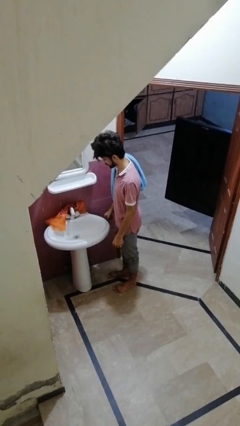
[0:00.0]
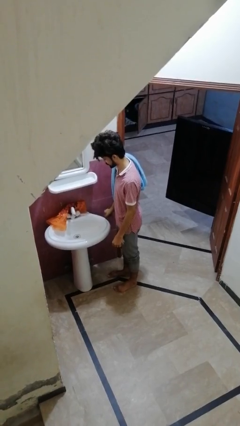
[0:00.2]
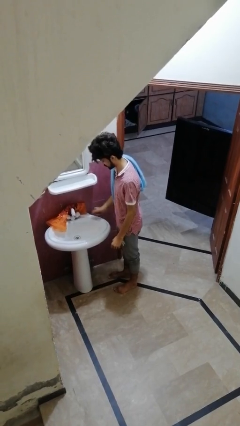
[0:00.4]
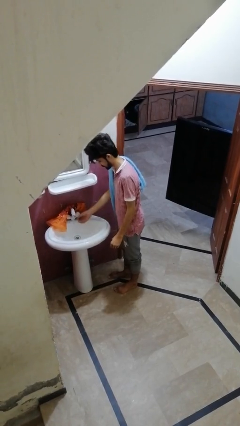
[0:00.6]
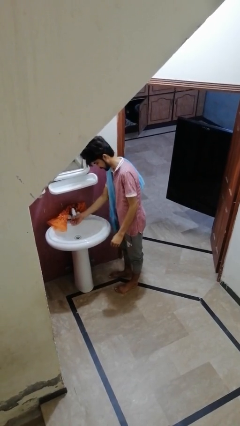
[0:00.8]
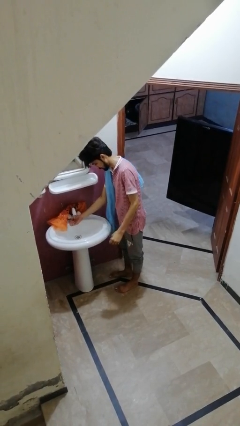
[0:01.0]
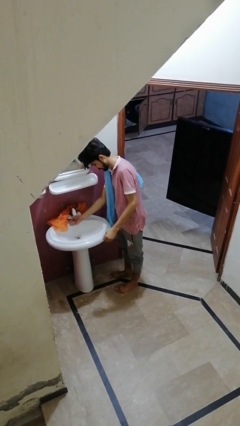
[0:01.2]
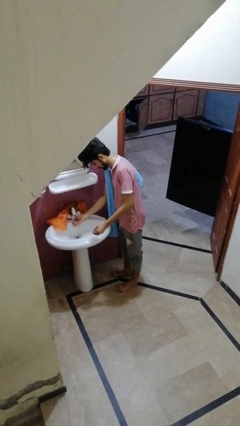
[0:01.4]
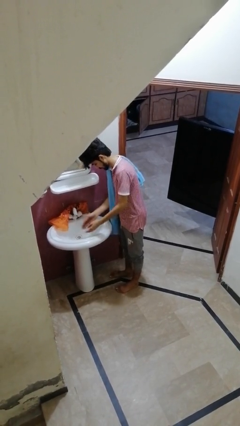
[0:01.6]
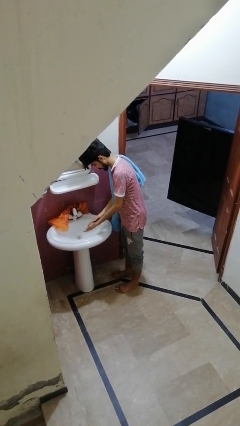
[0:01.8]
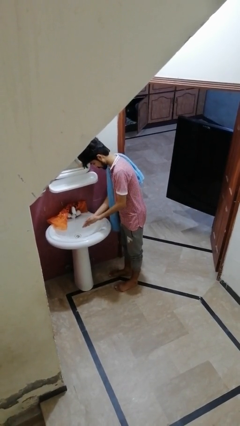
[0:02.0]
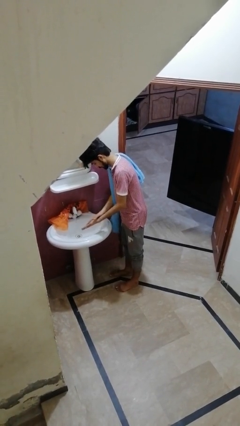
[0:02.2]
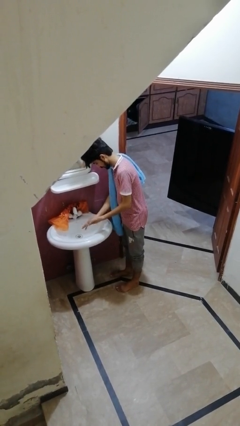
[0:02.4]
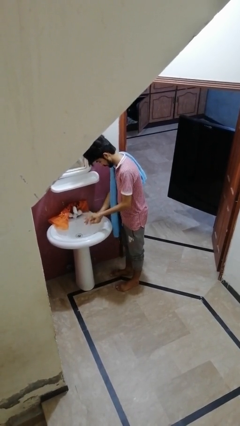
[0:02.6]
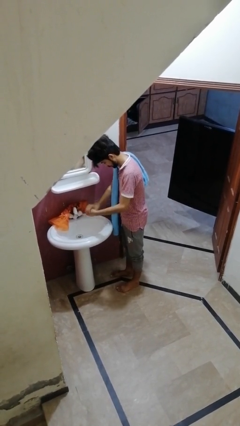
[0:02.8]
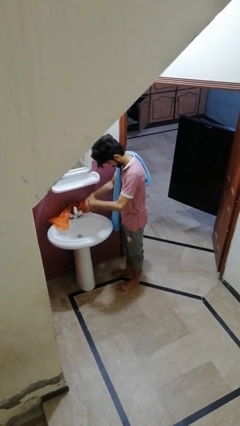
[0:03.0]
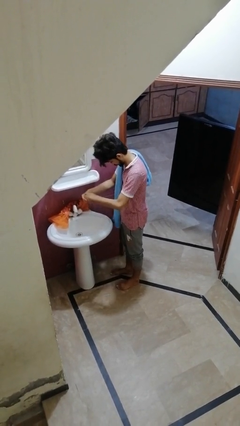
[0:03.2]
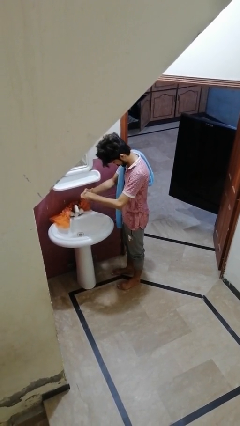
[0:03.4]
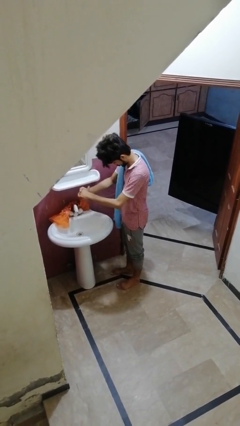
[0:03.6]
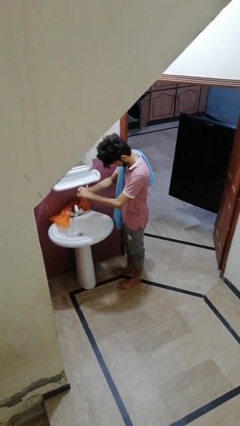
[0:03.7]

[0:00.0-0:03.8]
person washes hands

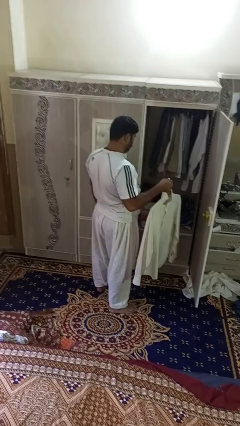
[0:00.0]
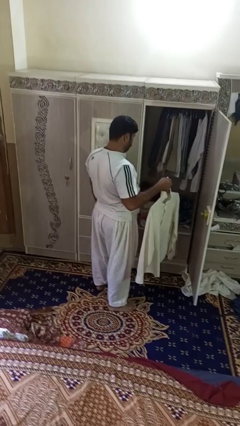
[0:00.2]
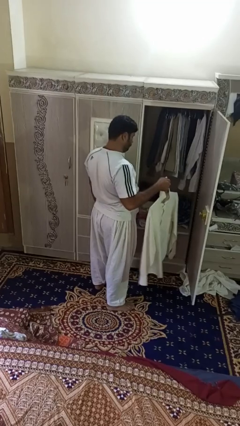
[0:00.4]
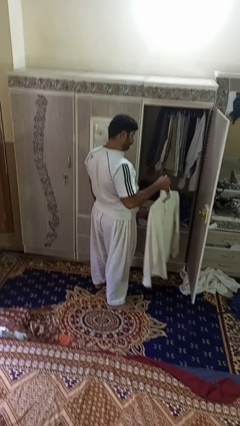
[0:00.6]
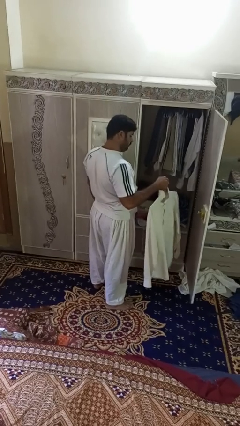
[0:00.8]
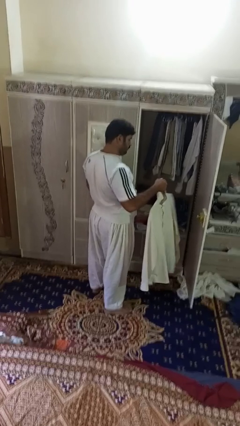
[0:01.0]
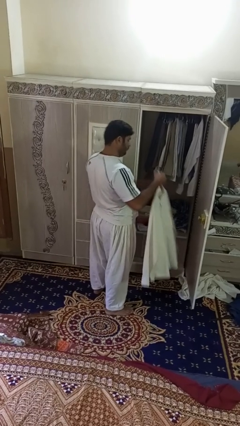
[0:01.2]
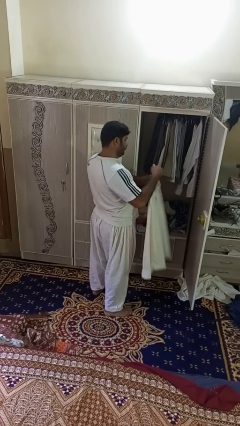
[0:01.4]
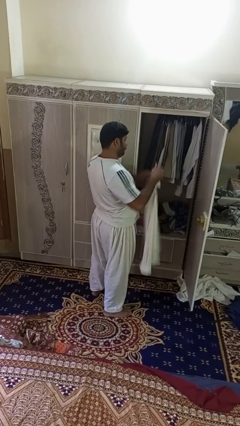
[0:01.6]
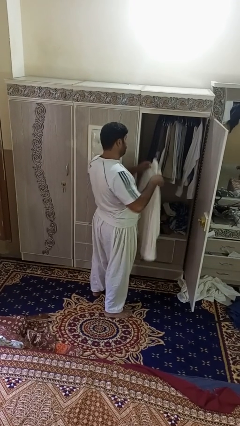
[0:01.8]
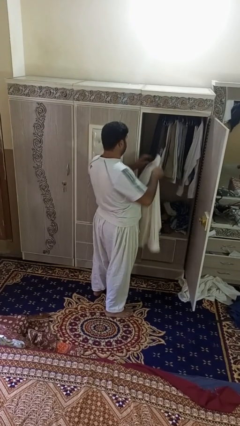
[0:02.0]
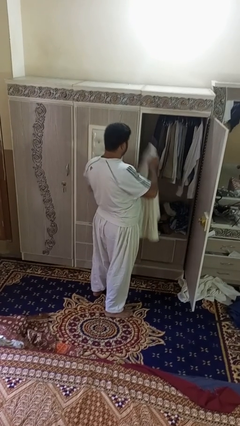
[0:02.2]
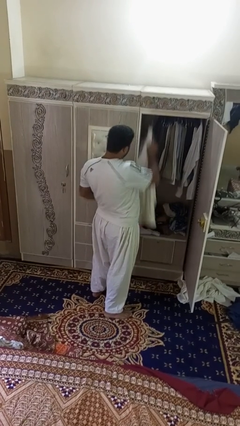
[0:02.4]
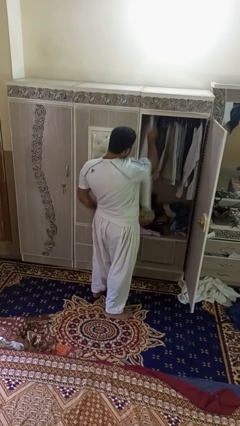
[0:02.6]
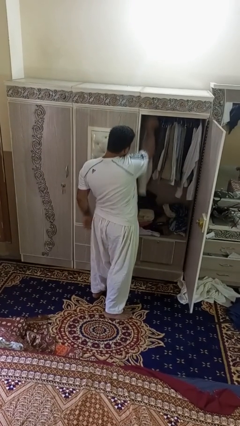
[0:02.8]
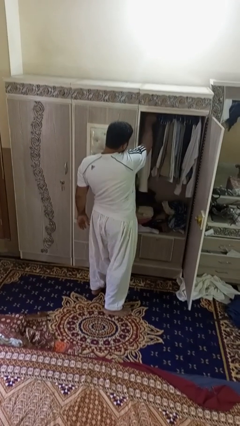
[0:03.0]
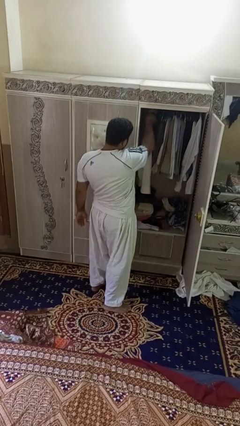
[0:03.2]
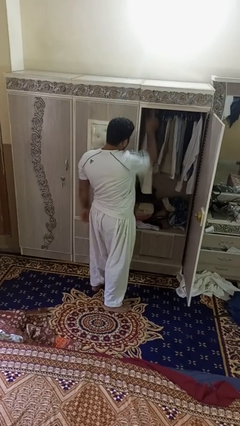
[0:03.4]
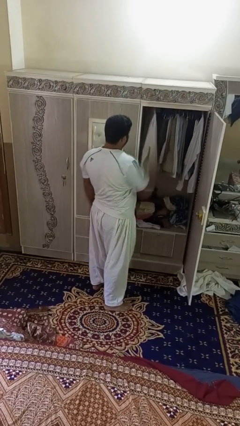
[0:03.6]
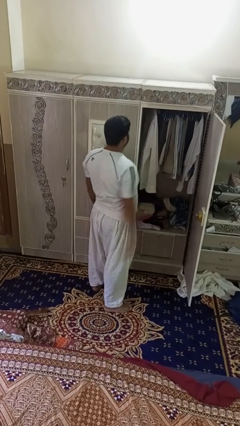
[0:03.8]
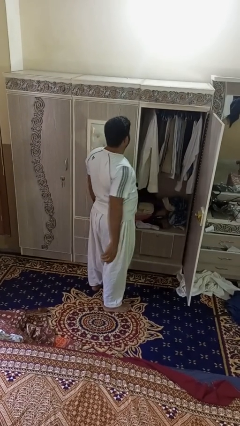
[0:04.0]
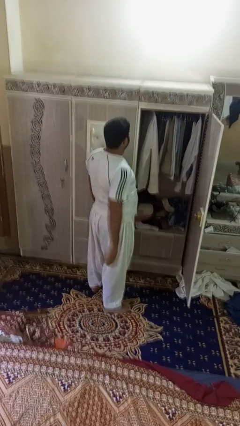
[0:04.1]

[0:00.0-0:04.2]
person puts clothes into closet

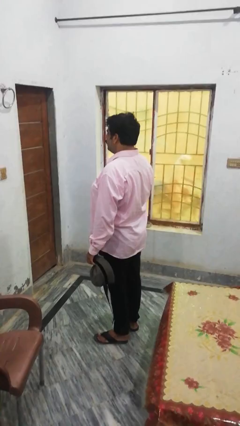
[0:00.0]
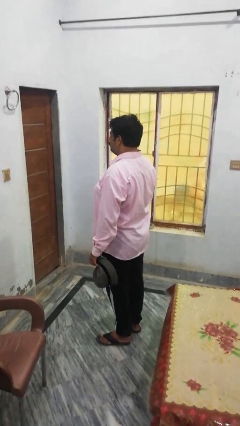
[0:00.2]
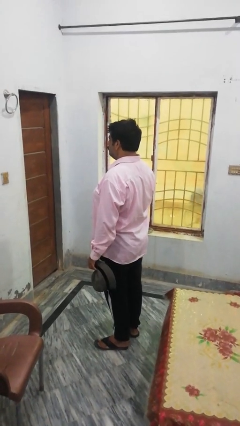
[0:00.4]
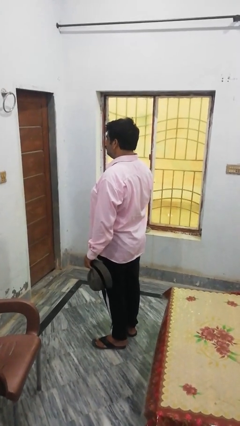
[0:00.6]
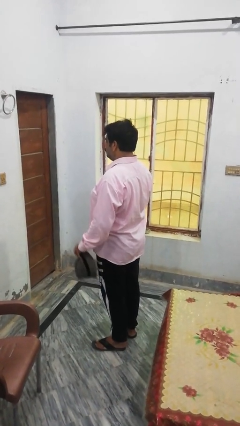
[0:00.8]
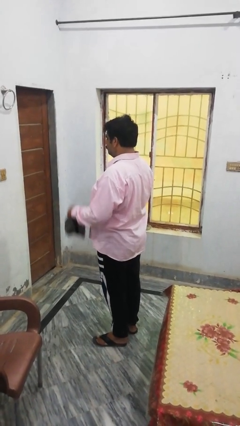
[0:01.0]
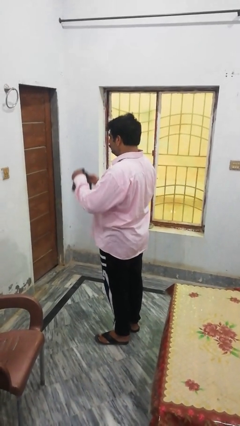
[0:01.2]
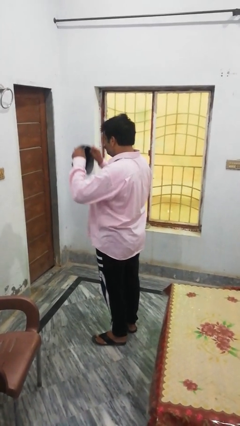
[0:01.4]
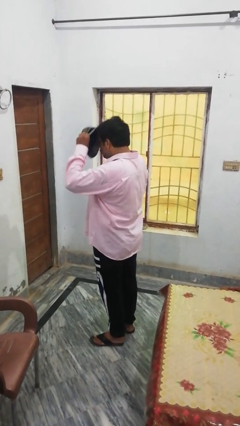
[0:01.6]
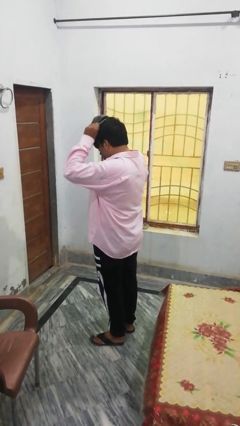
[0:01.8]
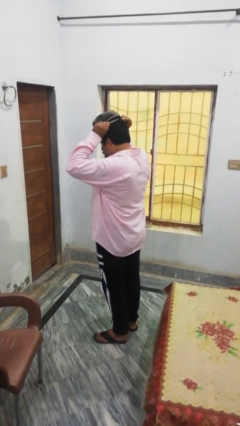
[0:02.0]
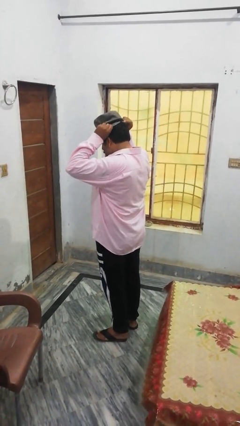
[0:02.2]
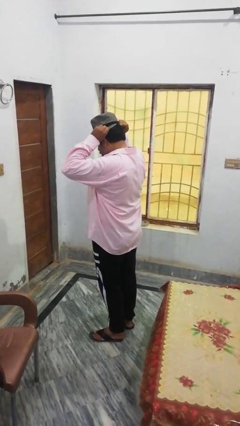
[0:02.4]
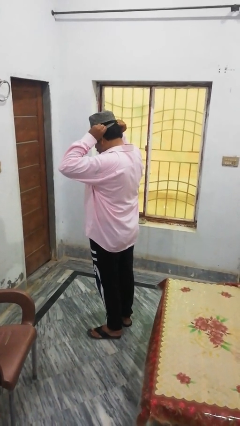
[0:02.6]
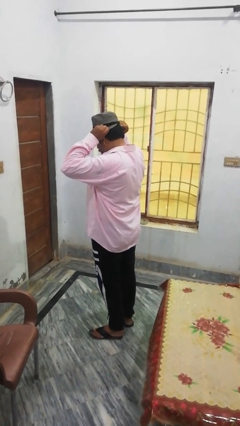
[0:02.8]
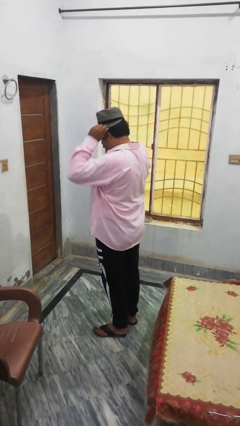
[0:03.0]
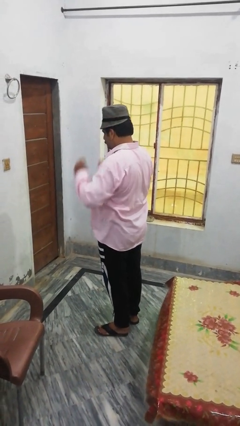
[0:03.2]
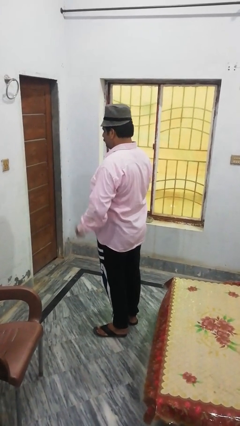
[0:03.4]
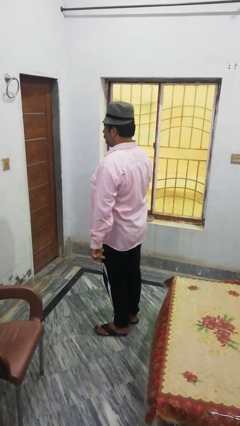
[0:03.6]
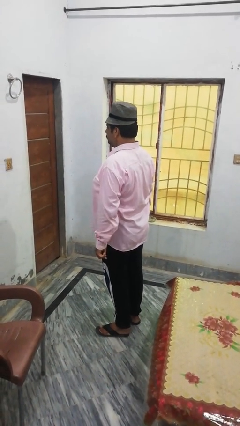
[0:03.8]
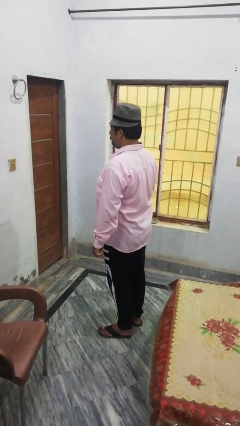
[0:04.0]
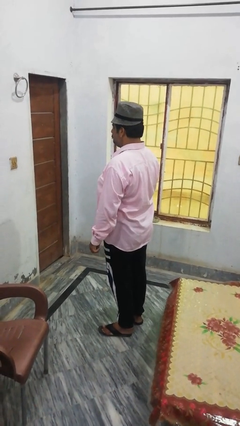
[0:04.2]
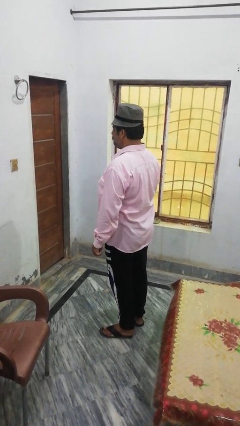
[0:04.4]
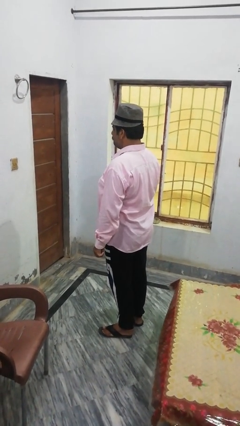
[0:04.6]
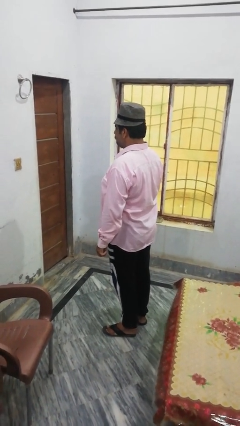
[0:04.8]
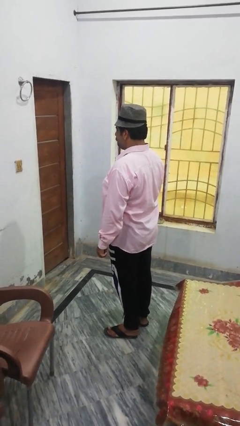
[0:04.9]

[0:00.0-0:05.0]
person puts on hat

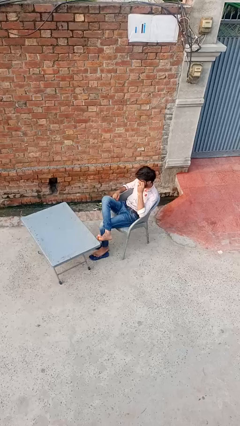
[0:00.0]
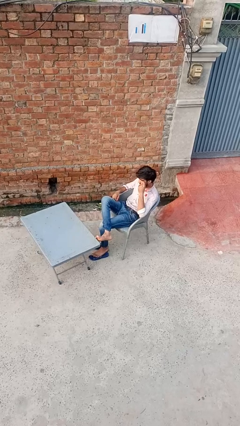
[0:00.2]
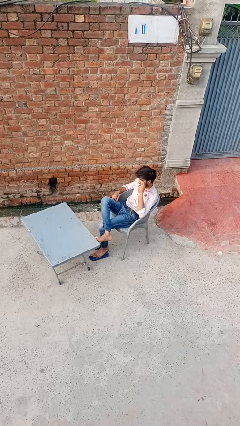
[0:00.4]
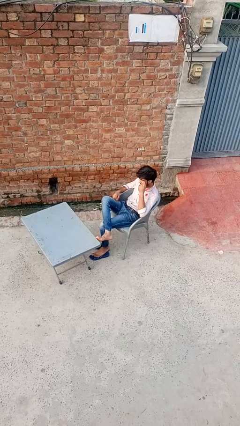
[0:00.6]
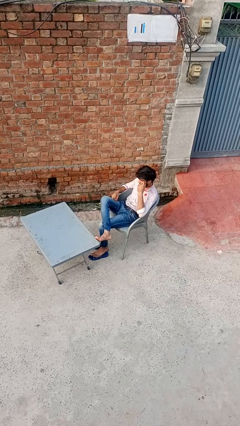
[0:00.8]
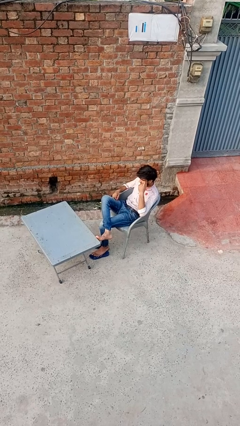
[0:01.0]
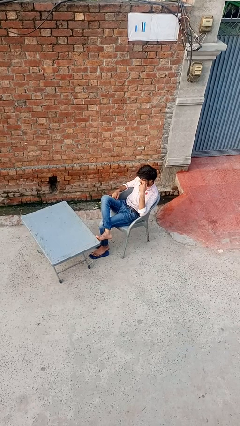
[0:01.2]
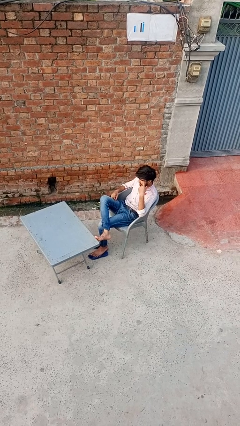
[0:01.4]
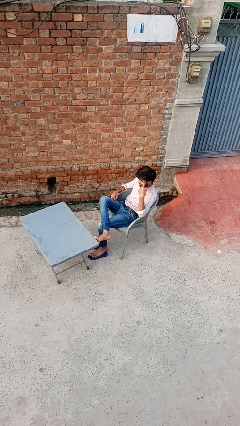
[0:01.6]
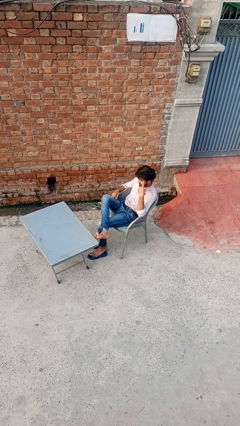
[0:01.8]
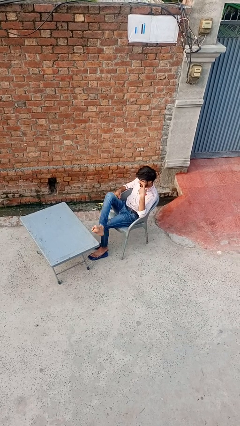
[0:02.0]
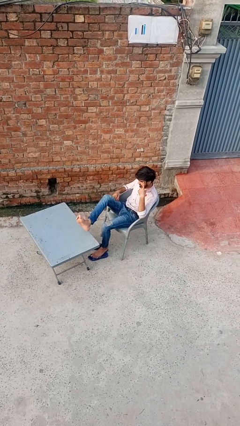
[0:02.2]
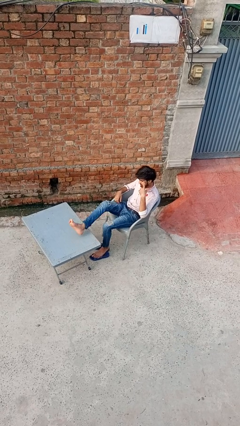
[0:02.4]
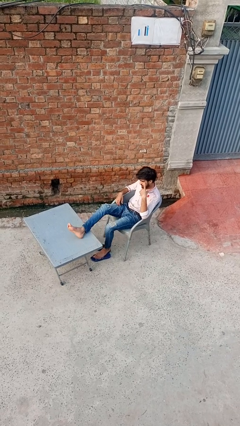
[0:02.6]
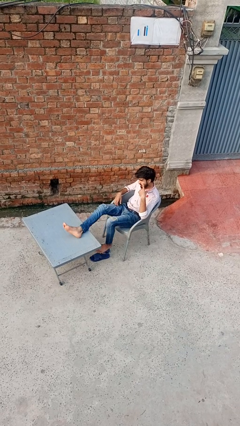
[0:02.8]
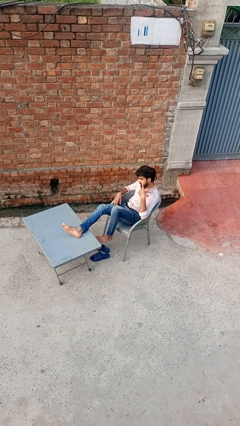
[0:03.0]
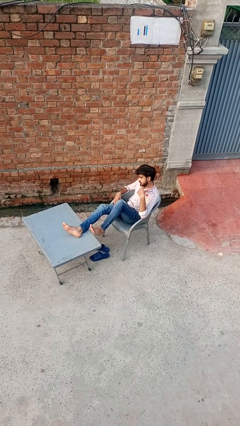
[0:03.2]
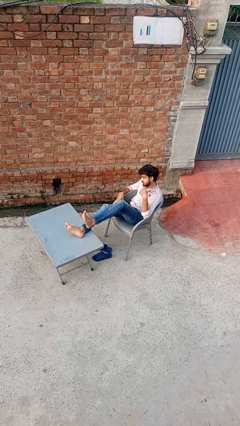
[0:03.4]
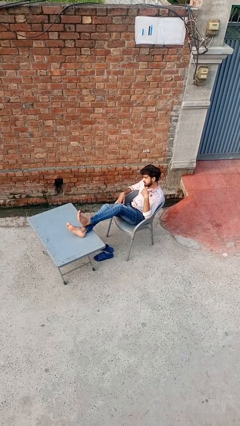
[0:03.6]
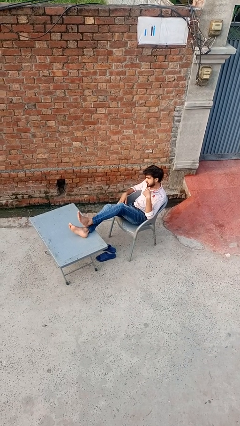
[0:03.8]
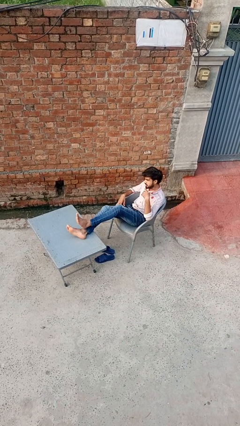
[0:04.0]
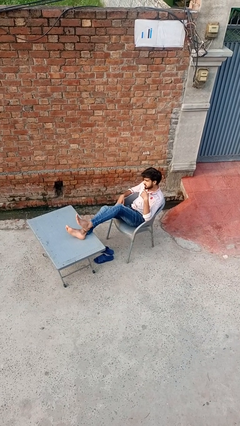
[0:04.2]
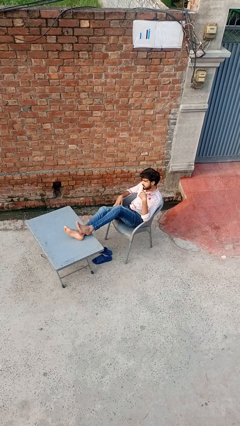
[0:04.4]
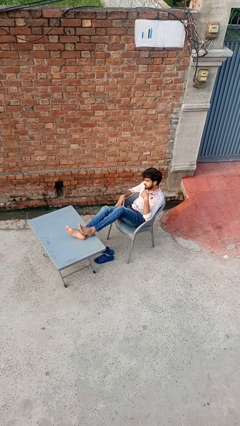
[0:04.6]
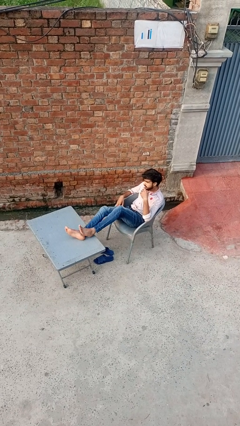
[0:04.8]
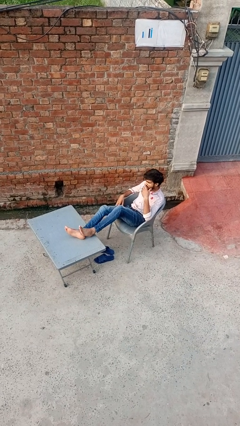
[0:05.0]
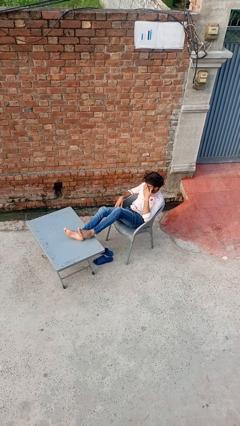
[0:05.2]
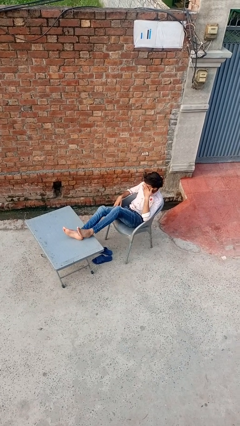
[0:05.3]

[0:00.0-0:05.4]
person puts feet up
